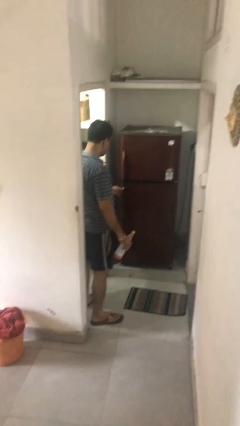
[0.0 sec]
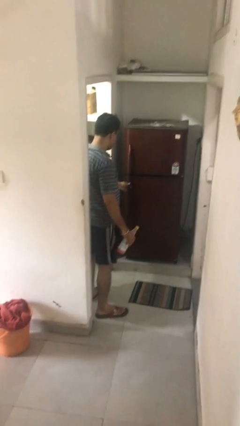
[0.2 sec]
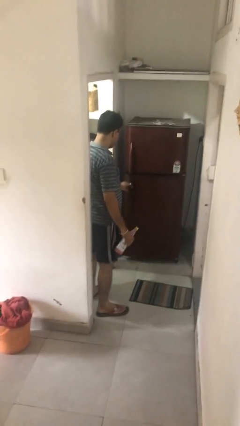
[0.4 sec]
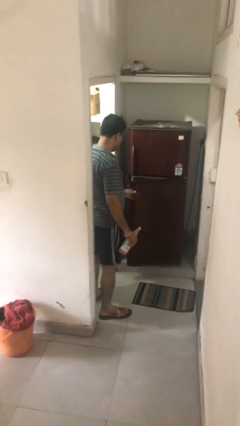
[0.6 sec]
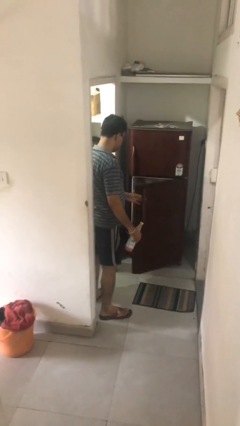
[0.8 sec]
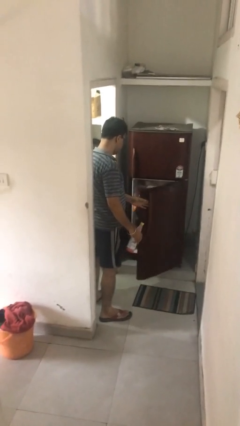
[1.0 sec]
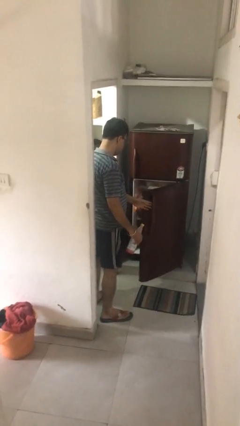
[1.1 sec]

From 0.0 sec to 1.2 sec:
person opens refrigerator

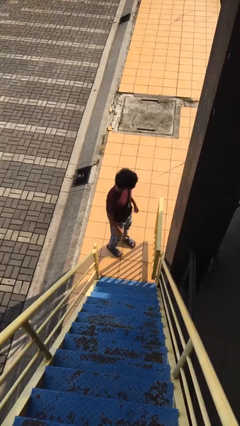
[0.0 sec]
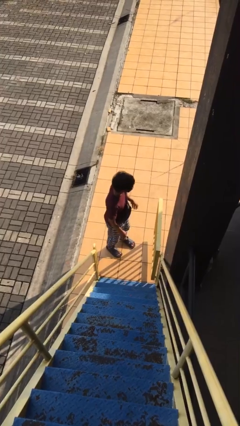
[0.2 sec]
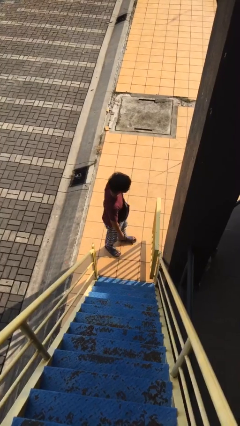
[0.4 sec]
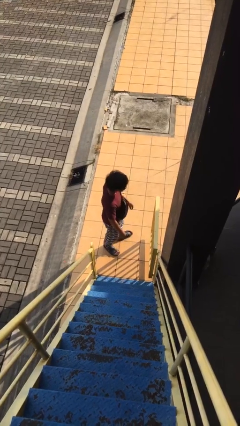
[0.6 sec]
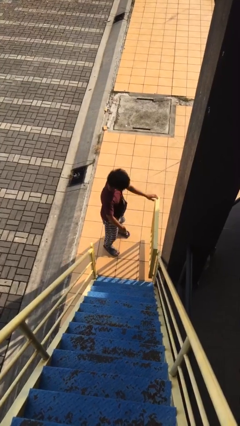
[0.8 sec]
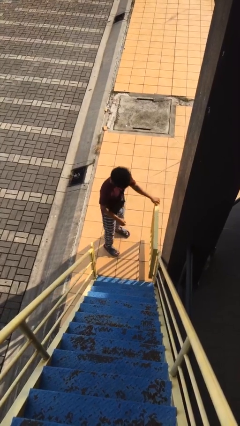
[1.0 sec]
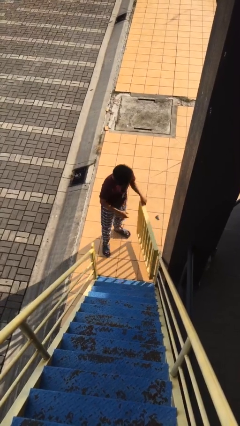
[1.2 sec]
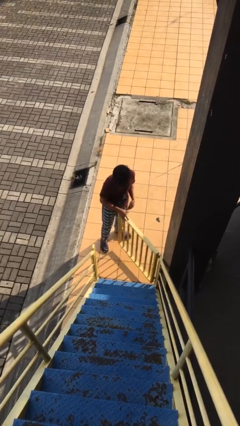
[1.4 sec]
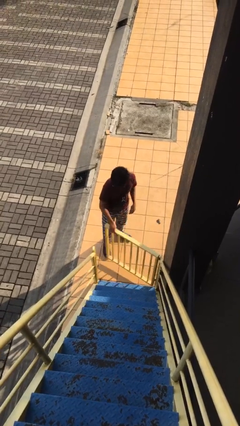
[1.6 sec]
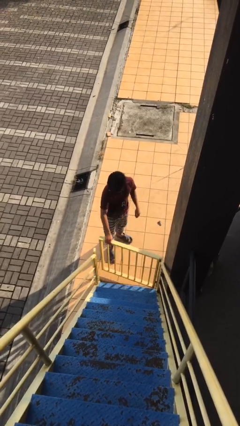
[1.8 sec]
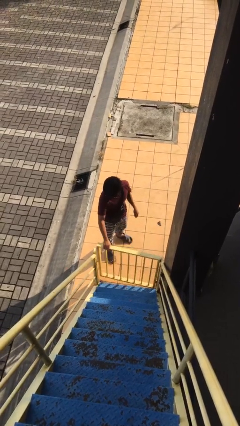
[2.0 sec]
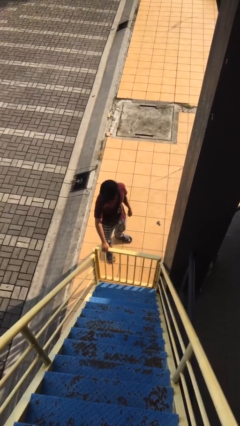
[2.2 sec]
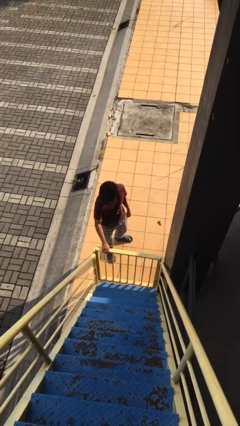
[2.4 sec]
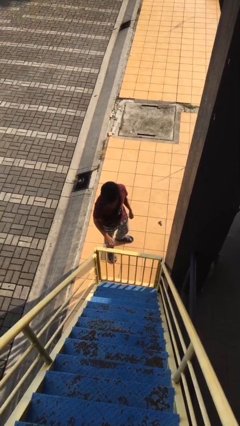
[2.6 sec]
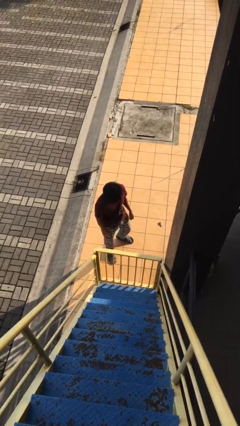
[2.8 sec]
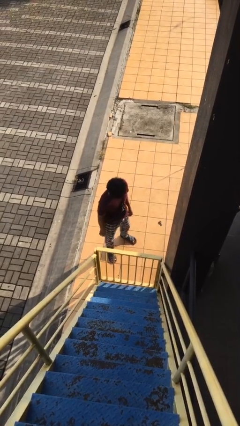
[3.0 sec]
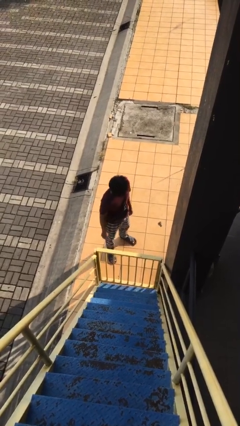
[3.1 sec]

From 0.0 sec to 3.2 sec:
person closes facility door

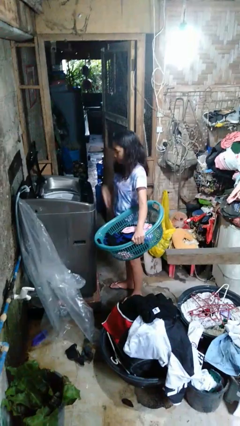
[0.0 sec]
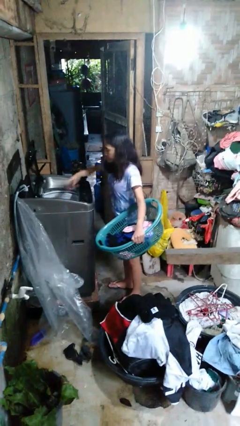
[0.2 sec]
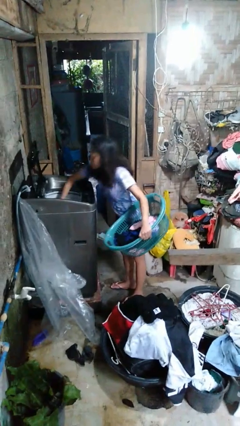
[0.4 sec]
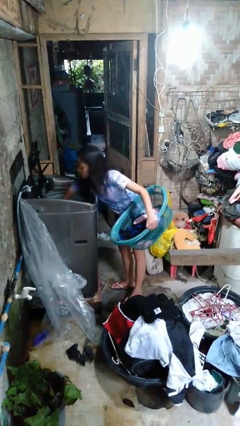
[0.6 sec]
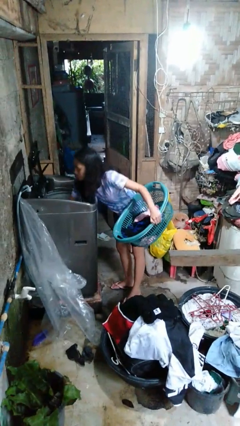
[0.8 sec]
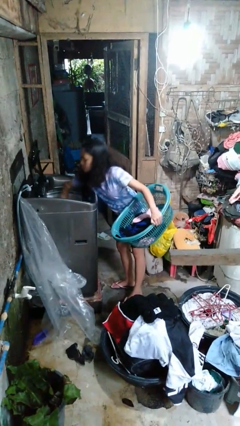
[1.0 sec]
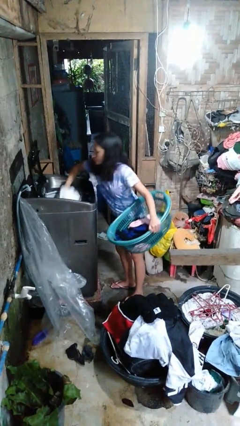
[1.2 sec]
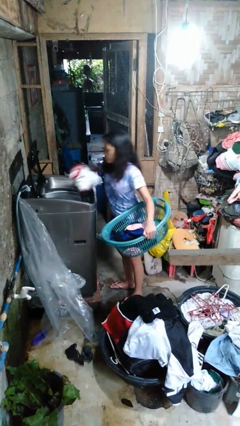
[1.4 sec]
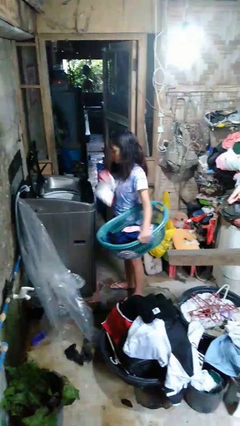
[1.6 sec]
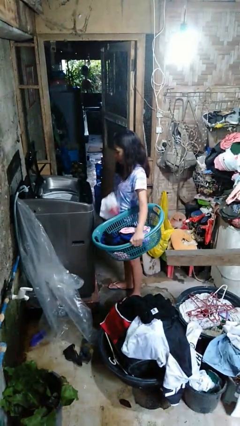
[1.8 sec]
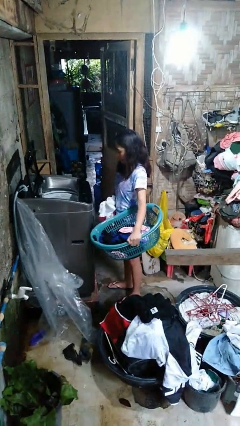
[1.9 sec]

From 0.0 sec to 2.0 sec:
person unloads clotheswasher

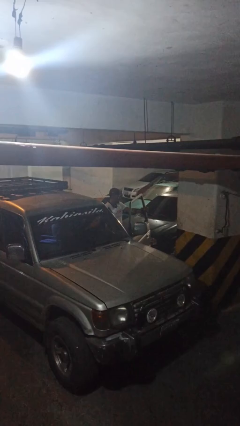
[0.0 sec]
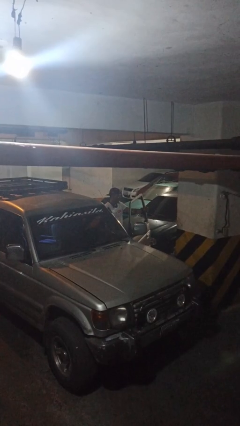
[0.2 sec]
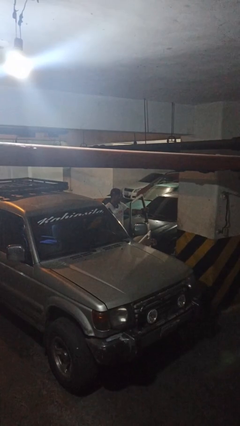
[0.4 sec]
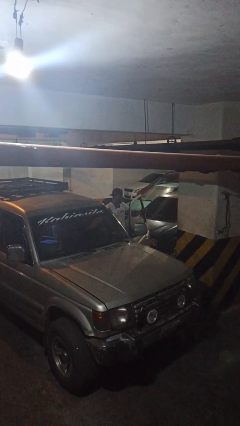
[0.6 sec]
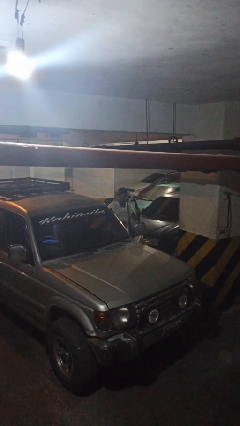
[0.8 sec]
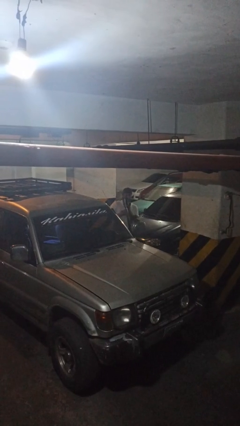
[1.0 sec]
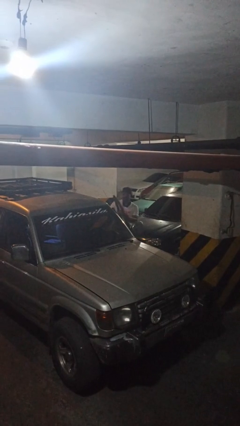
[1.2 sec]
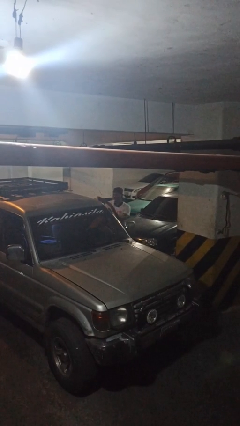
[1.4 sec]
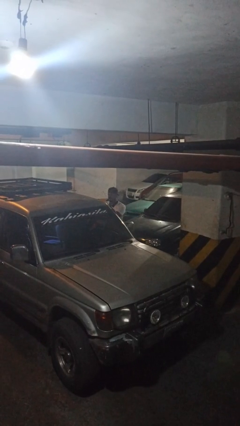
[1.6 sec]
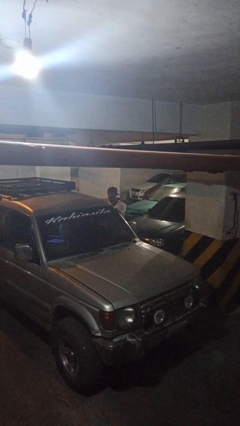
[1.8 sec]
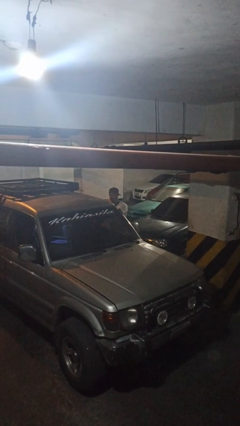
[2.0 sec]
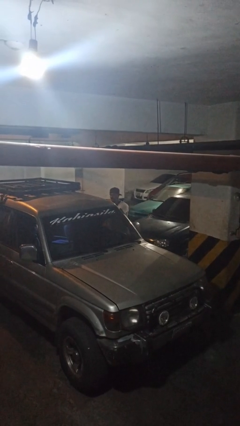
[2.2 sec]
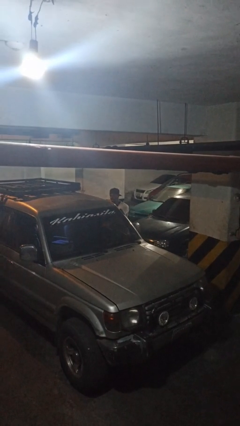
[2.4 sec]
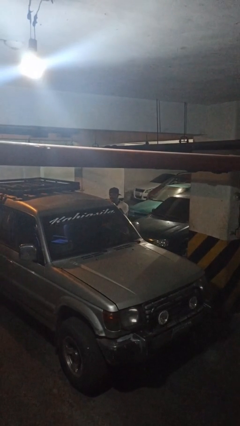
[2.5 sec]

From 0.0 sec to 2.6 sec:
person closes car door

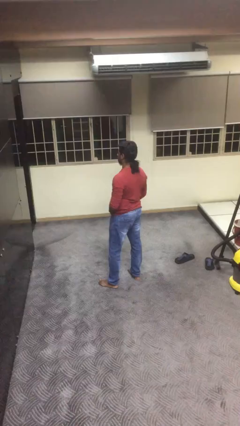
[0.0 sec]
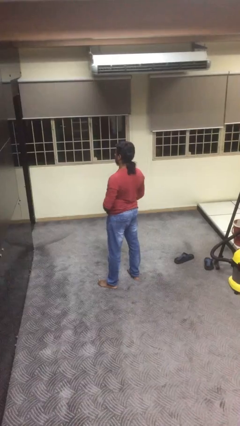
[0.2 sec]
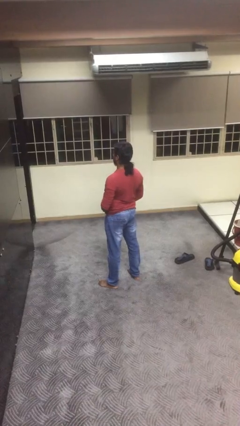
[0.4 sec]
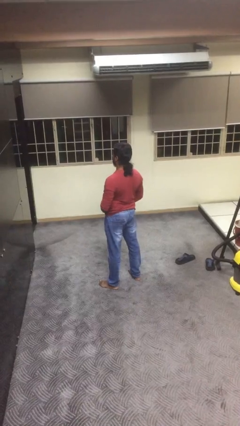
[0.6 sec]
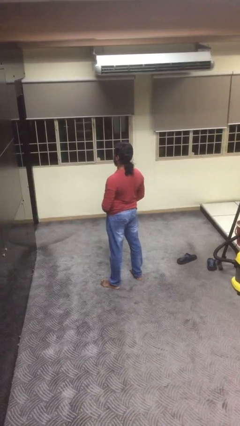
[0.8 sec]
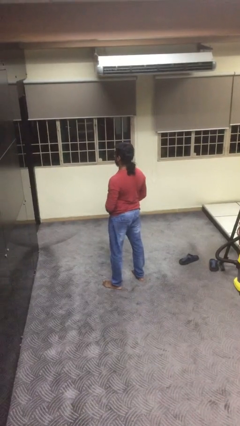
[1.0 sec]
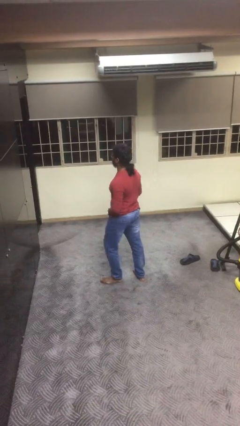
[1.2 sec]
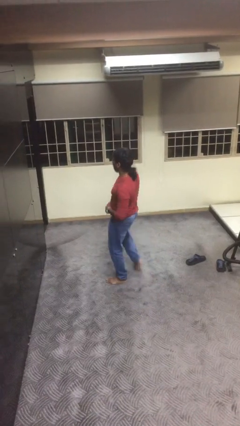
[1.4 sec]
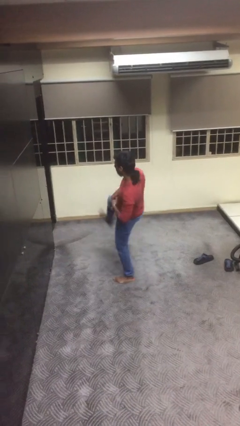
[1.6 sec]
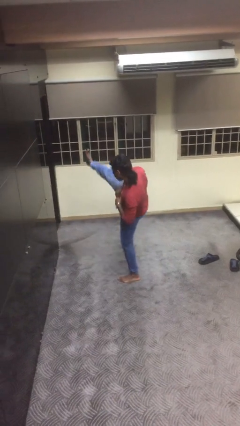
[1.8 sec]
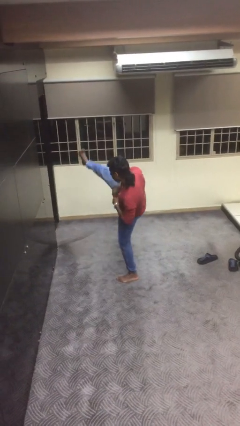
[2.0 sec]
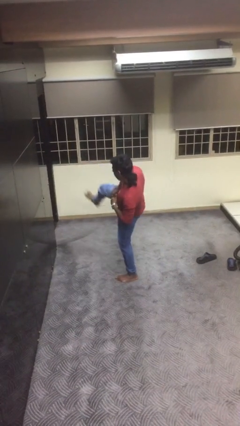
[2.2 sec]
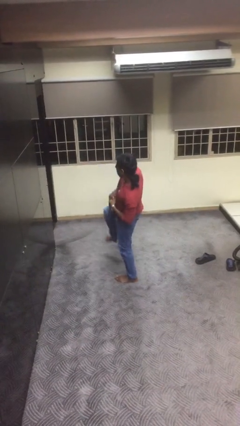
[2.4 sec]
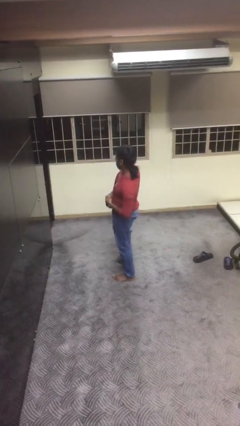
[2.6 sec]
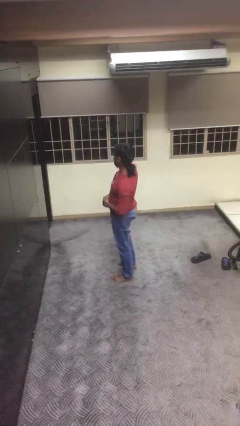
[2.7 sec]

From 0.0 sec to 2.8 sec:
person karate kicks

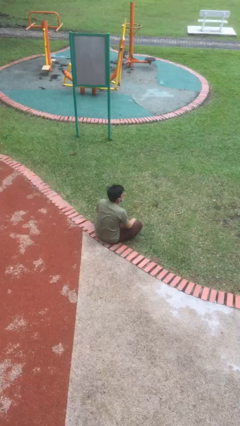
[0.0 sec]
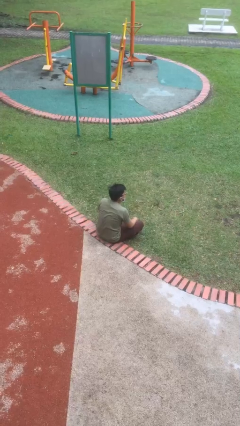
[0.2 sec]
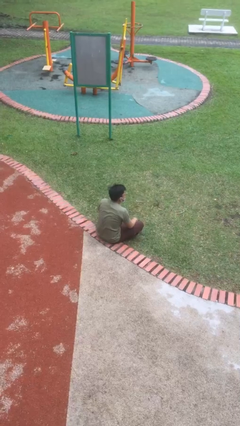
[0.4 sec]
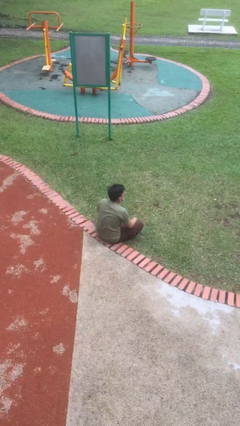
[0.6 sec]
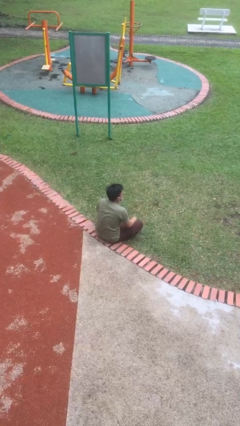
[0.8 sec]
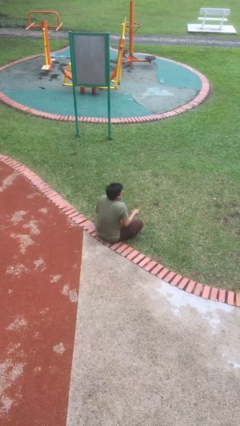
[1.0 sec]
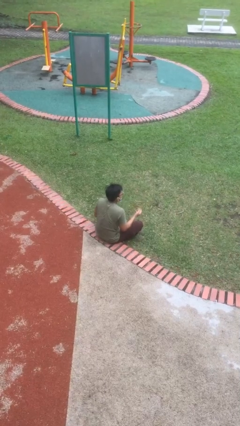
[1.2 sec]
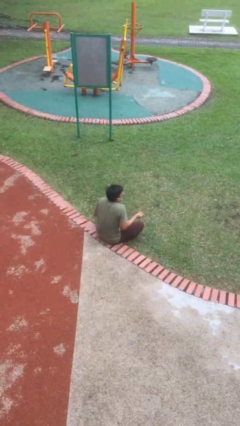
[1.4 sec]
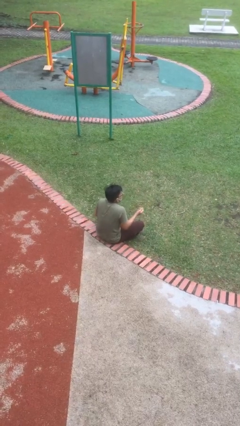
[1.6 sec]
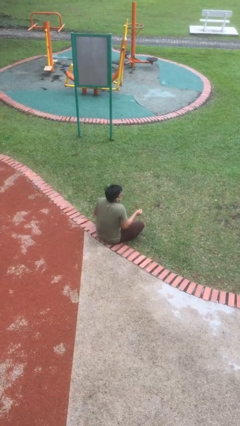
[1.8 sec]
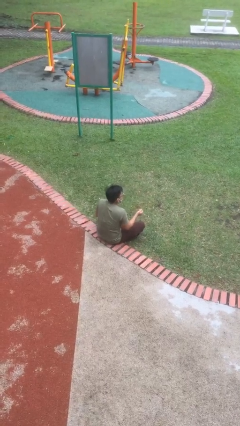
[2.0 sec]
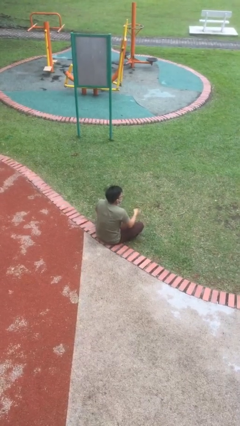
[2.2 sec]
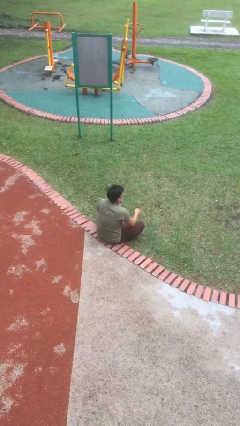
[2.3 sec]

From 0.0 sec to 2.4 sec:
person shrugs

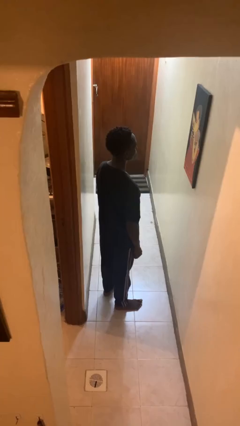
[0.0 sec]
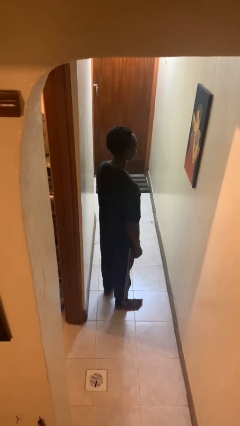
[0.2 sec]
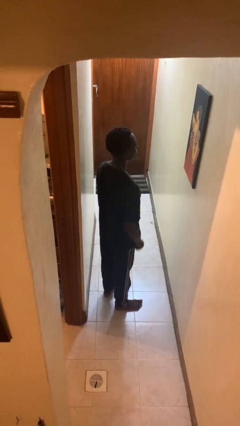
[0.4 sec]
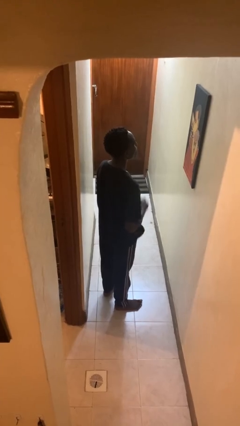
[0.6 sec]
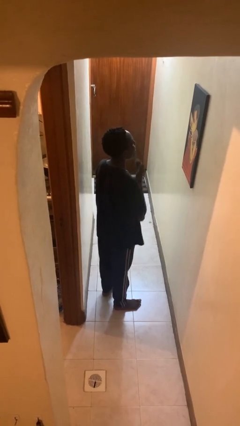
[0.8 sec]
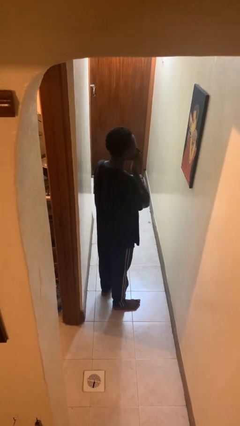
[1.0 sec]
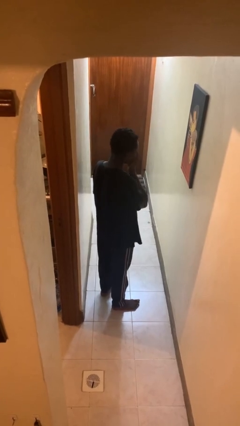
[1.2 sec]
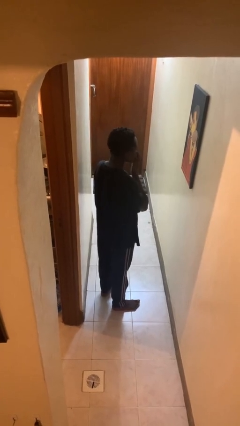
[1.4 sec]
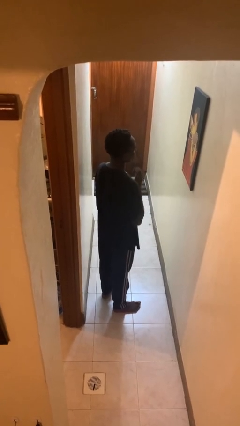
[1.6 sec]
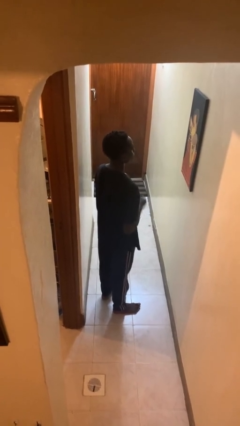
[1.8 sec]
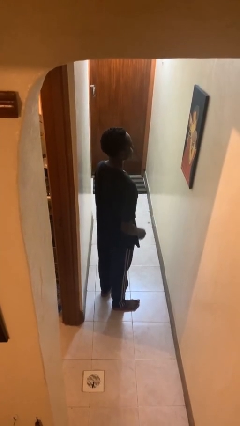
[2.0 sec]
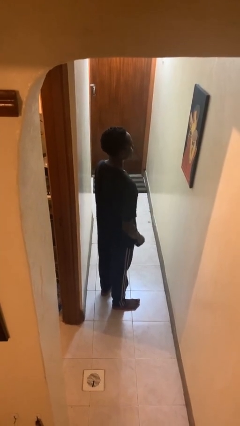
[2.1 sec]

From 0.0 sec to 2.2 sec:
person sneezes into hand

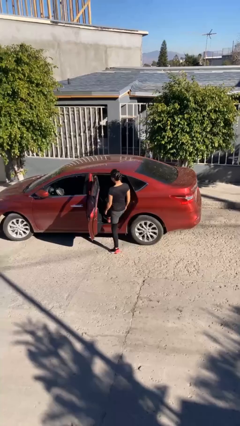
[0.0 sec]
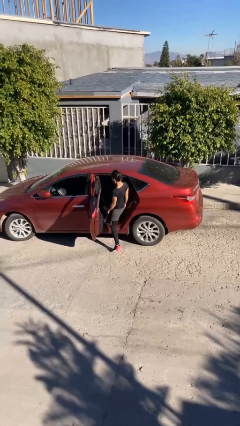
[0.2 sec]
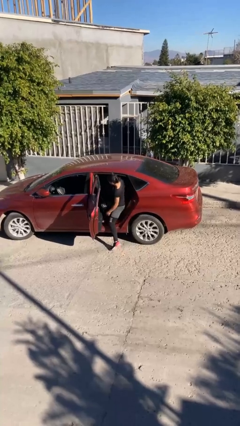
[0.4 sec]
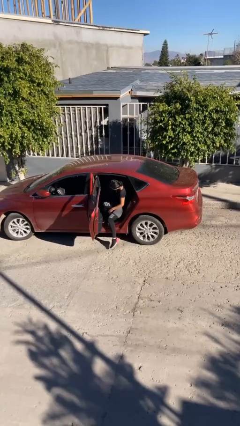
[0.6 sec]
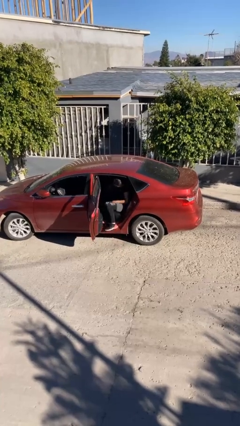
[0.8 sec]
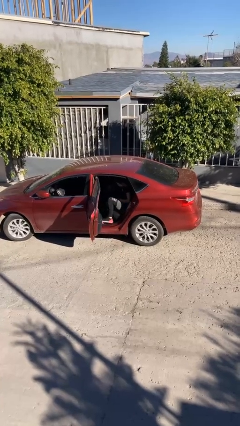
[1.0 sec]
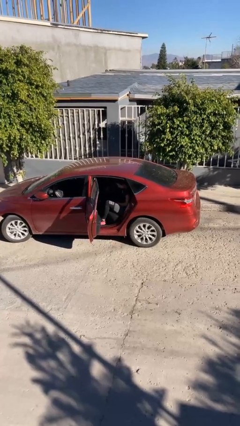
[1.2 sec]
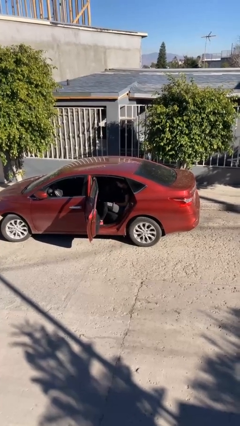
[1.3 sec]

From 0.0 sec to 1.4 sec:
person enters car
